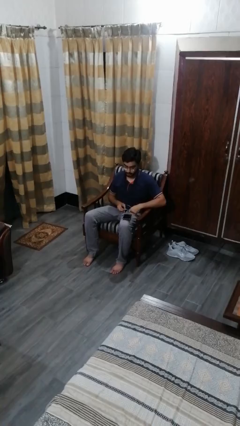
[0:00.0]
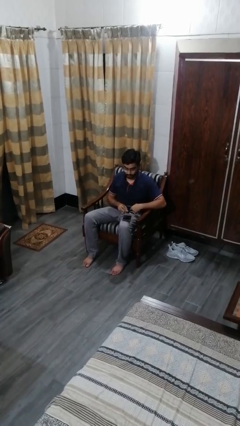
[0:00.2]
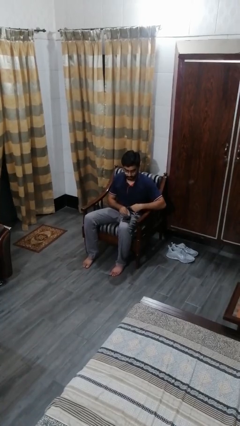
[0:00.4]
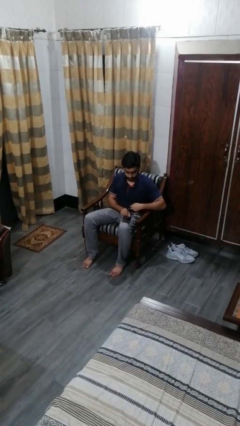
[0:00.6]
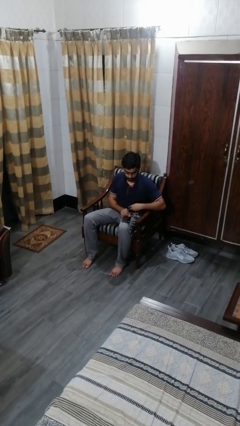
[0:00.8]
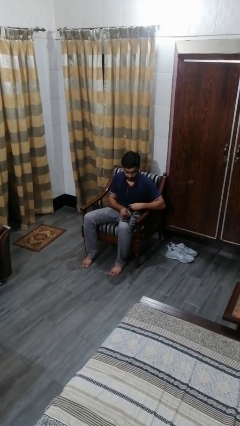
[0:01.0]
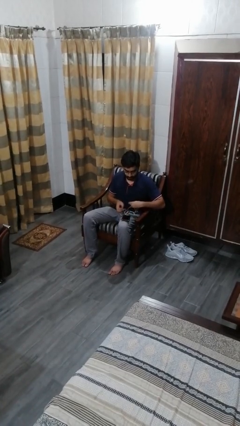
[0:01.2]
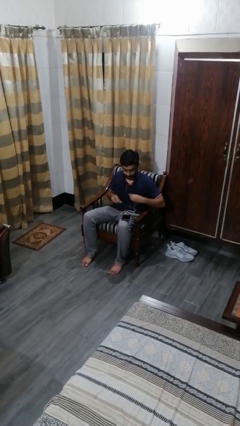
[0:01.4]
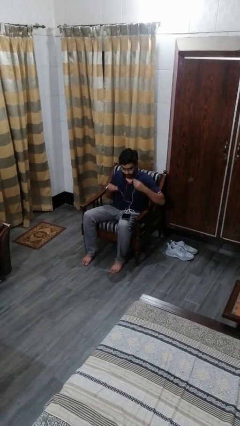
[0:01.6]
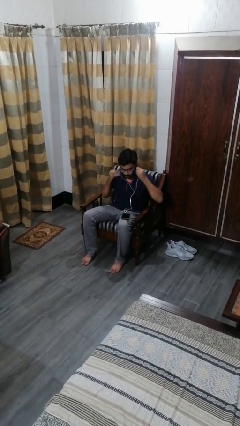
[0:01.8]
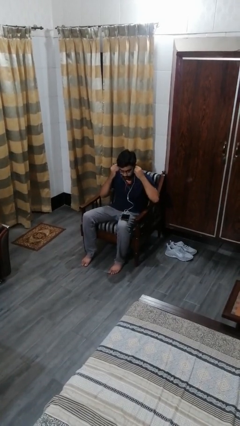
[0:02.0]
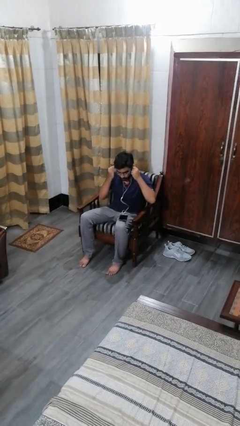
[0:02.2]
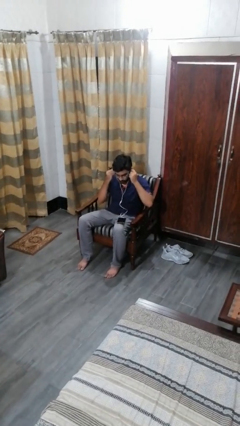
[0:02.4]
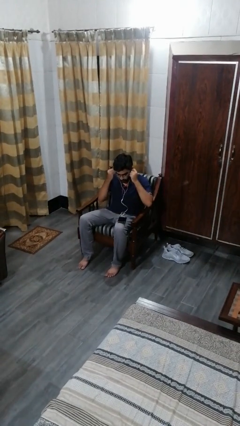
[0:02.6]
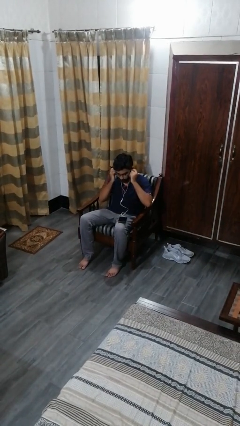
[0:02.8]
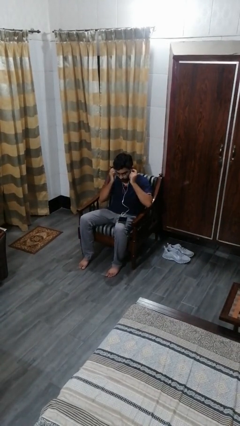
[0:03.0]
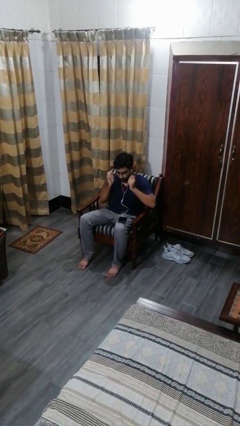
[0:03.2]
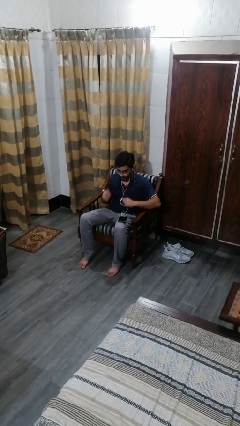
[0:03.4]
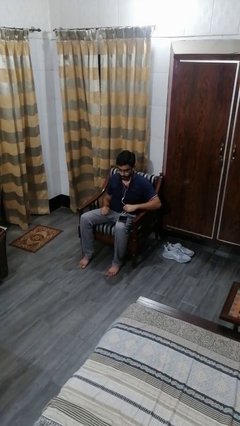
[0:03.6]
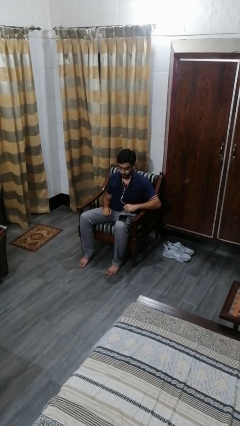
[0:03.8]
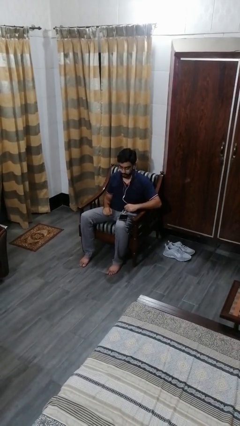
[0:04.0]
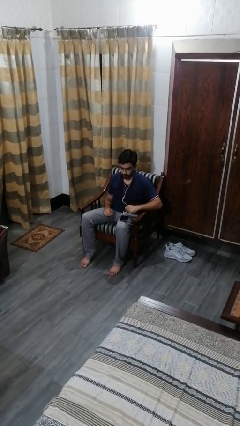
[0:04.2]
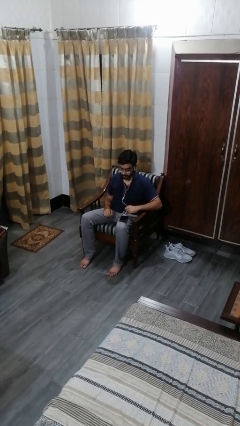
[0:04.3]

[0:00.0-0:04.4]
person puts on headphones

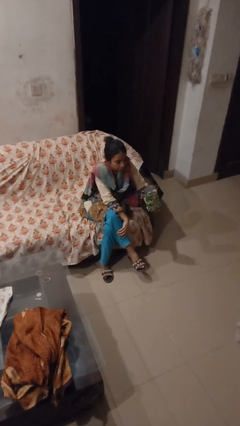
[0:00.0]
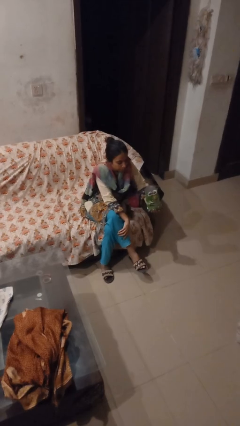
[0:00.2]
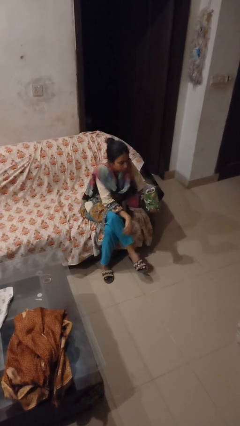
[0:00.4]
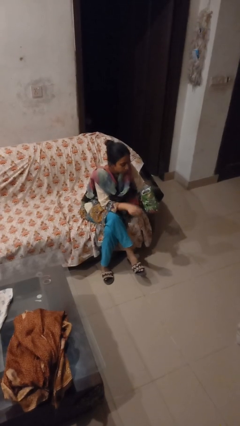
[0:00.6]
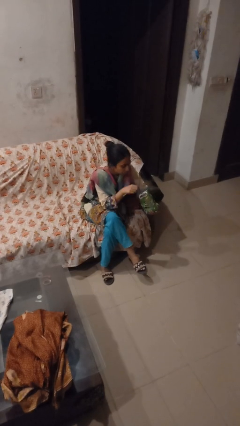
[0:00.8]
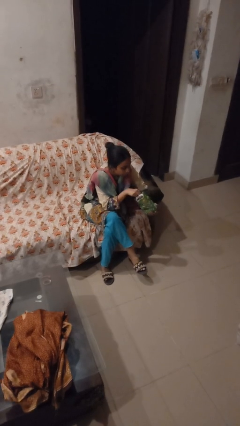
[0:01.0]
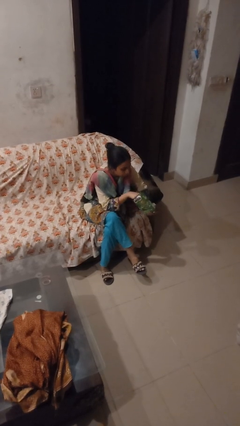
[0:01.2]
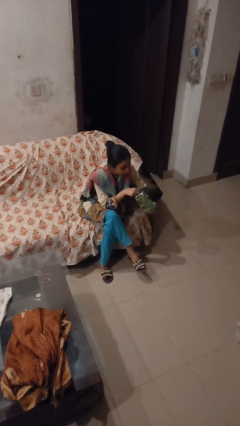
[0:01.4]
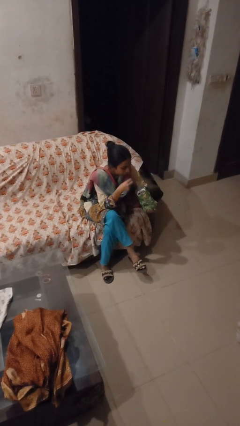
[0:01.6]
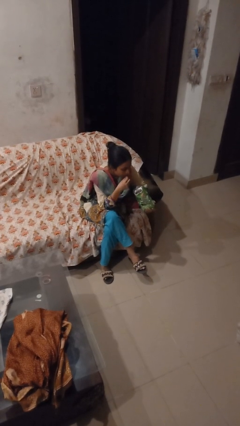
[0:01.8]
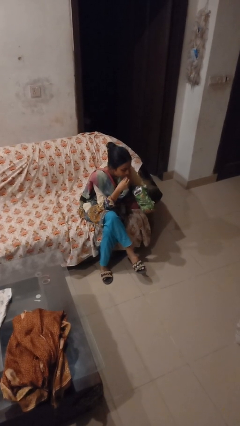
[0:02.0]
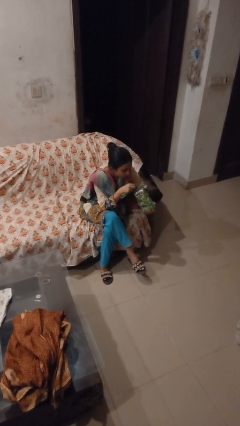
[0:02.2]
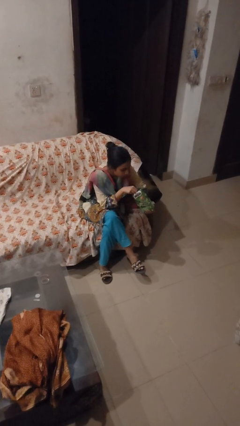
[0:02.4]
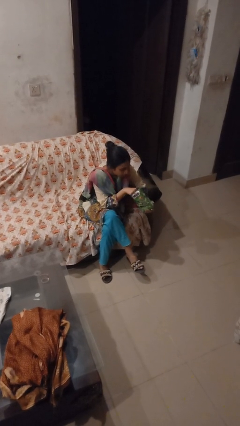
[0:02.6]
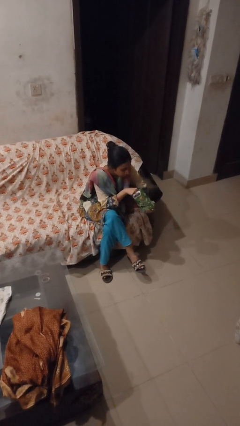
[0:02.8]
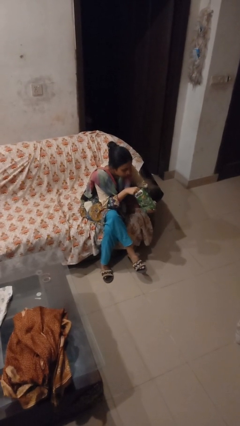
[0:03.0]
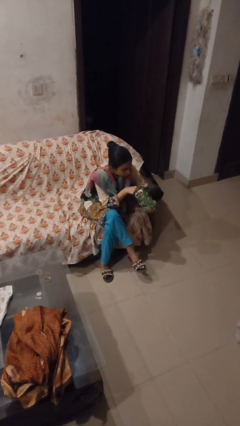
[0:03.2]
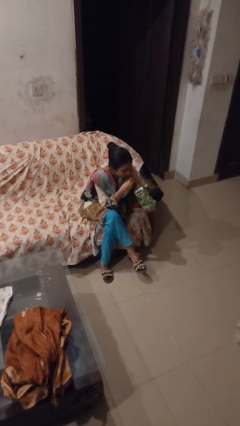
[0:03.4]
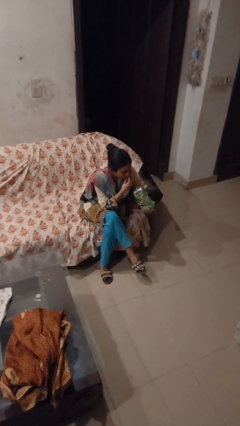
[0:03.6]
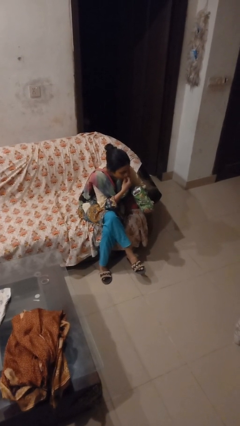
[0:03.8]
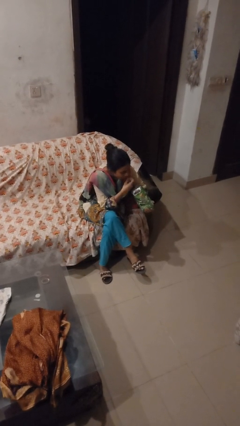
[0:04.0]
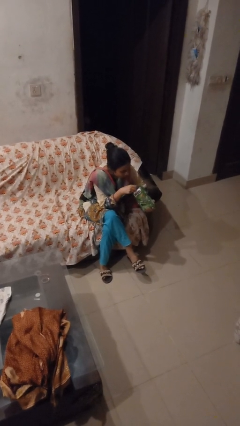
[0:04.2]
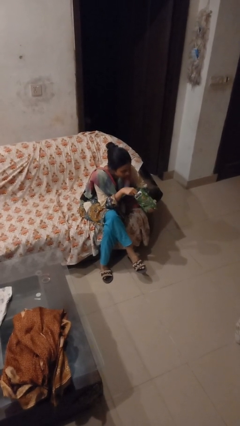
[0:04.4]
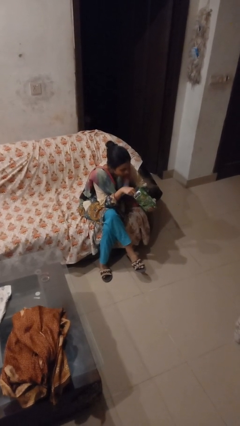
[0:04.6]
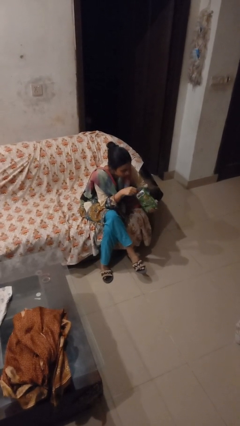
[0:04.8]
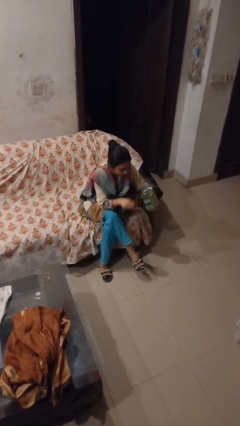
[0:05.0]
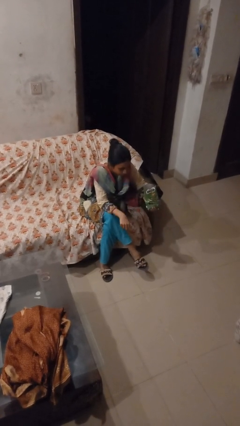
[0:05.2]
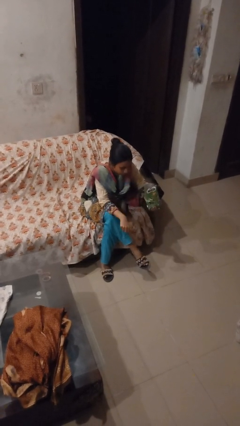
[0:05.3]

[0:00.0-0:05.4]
person eats snack from bag

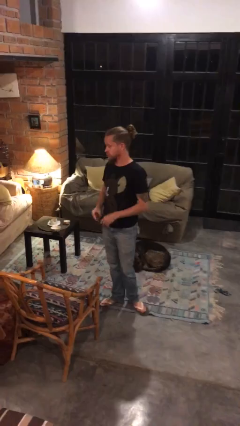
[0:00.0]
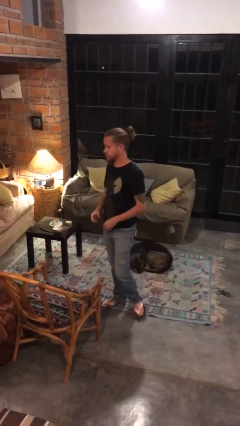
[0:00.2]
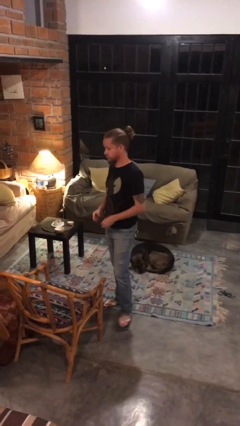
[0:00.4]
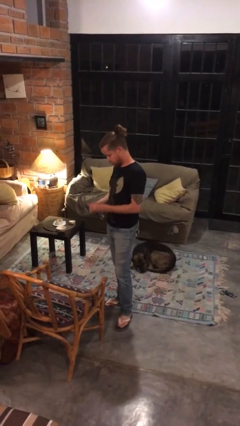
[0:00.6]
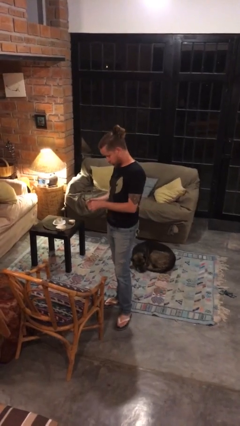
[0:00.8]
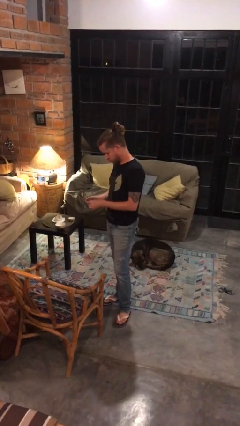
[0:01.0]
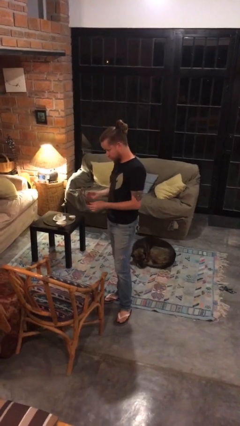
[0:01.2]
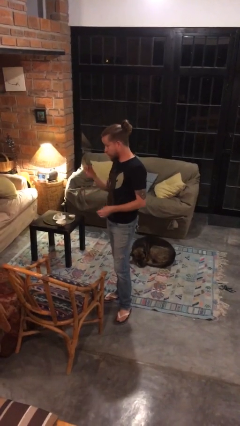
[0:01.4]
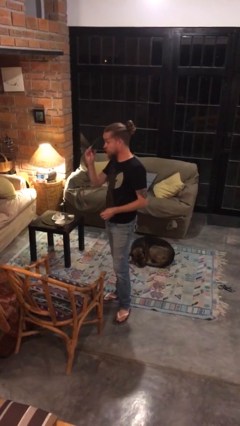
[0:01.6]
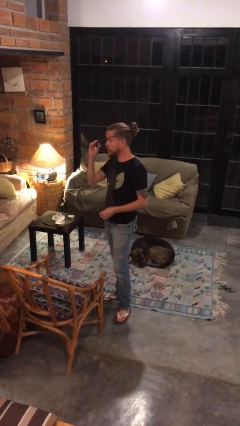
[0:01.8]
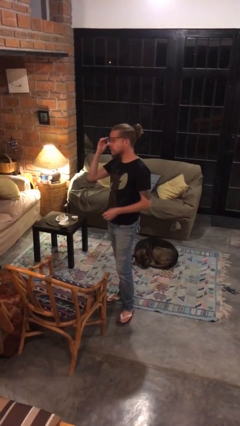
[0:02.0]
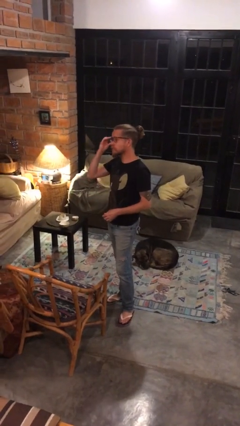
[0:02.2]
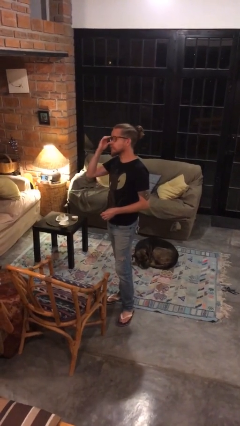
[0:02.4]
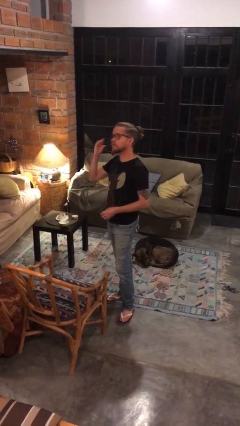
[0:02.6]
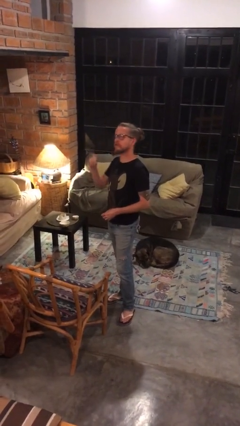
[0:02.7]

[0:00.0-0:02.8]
person puts on glasses

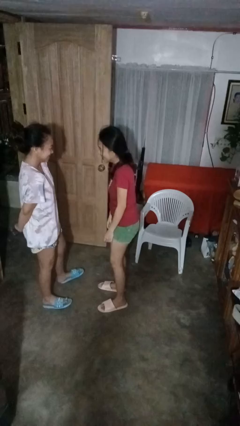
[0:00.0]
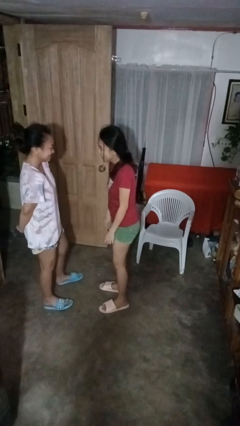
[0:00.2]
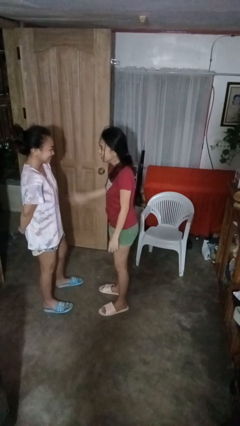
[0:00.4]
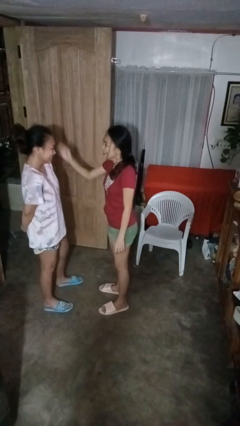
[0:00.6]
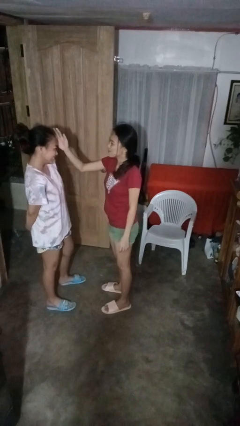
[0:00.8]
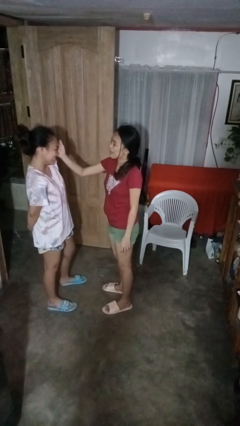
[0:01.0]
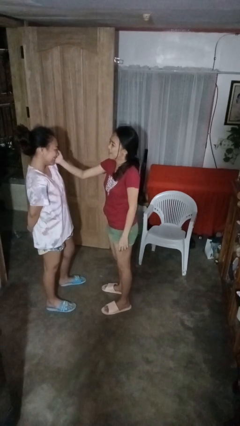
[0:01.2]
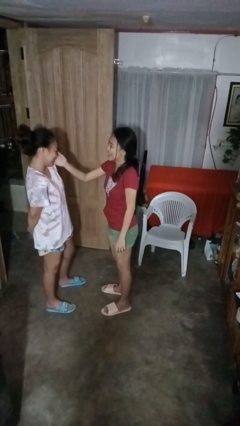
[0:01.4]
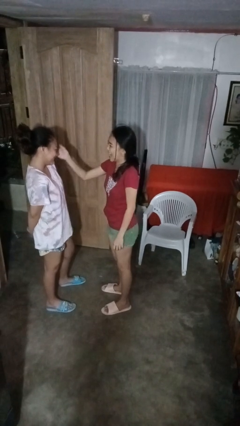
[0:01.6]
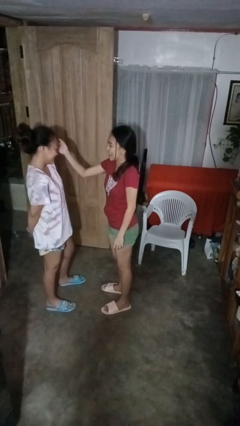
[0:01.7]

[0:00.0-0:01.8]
person touches face of person

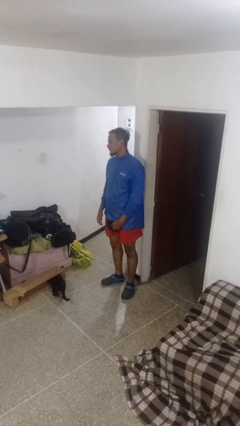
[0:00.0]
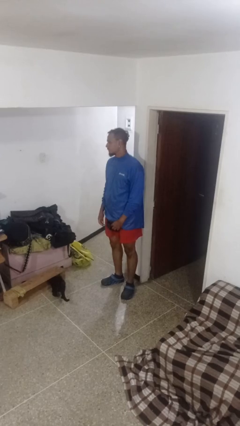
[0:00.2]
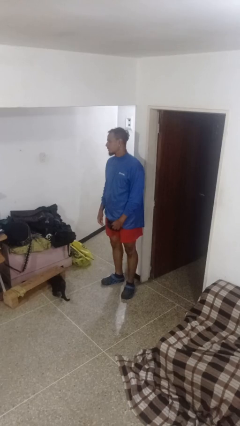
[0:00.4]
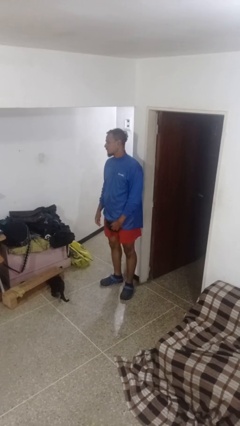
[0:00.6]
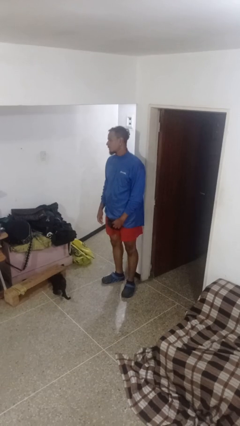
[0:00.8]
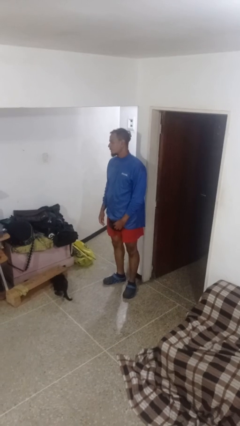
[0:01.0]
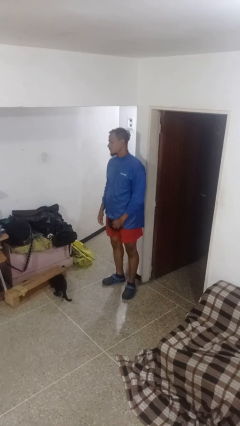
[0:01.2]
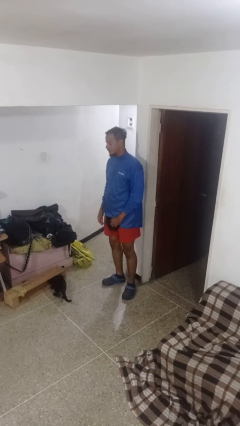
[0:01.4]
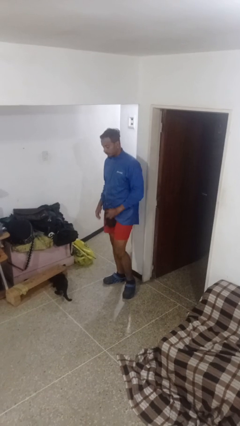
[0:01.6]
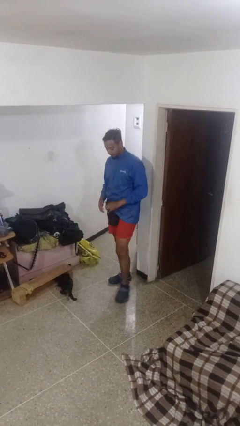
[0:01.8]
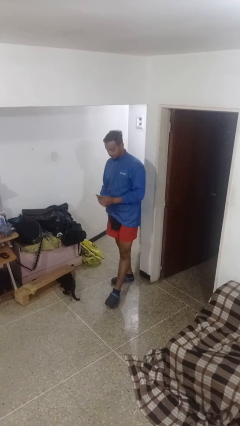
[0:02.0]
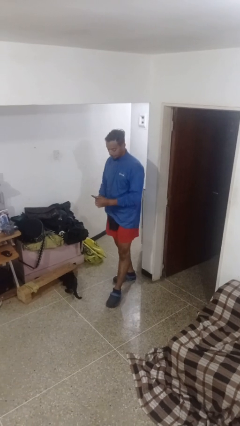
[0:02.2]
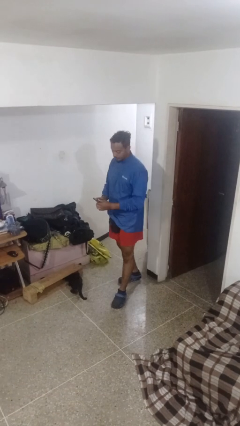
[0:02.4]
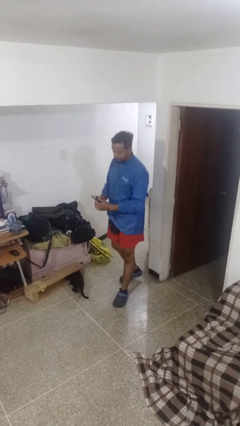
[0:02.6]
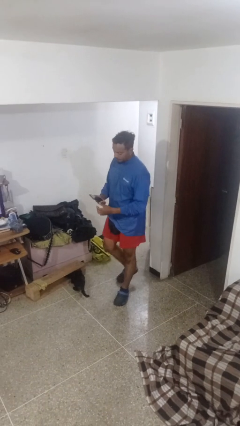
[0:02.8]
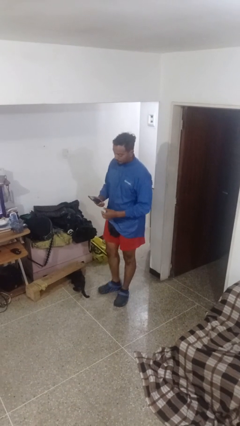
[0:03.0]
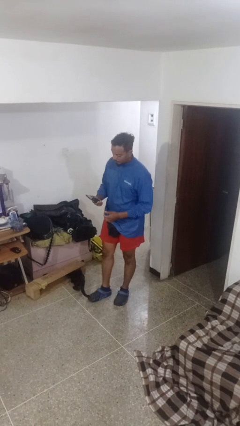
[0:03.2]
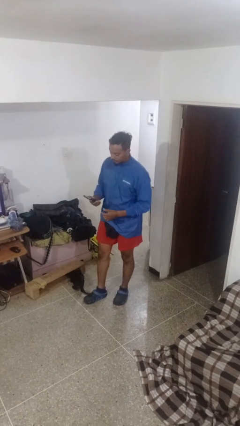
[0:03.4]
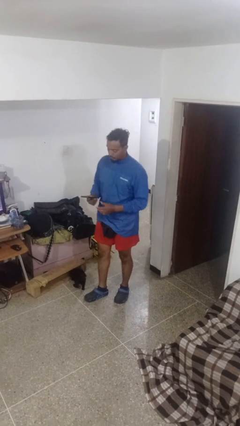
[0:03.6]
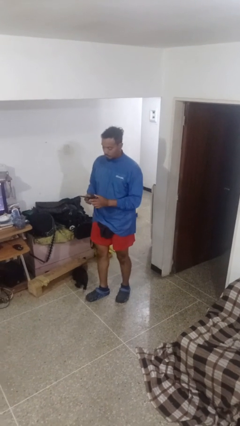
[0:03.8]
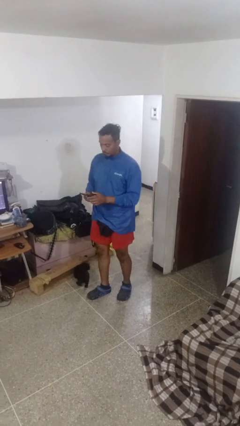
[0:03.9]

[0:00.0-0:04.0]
person takes phone from pocket
